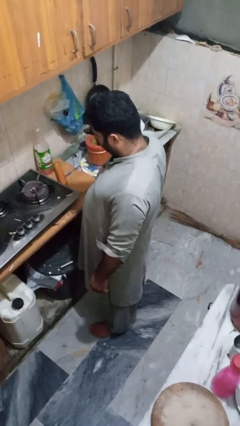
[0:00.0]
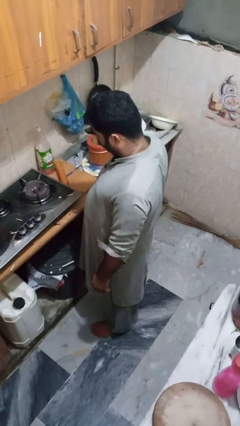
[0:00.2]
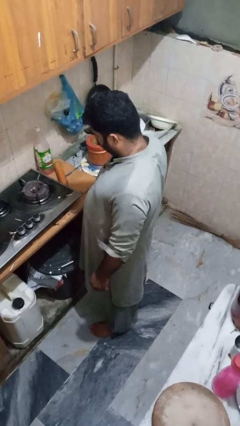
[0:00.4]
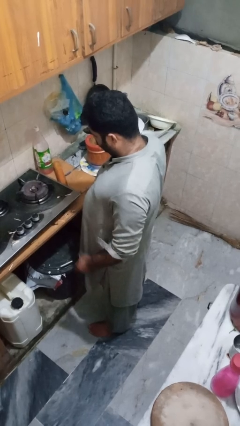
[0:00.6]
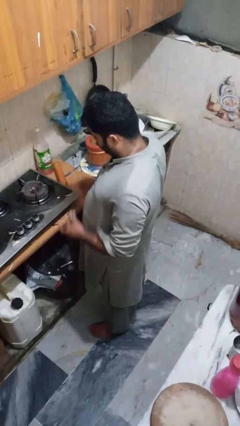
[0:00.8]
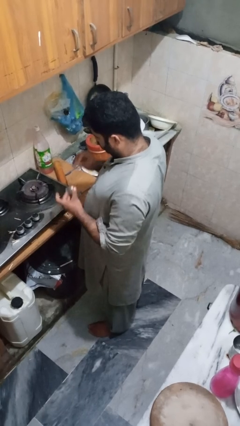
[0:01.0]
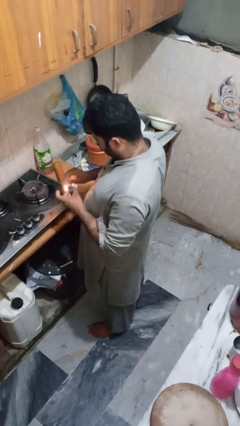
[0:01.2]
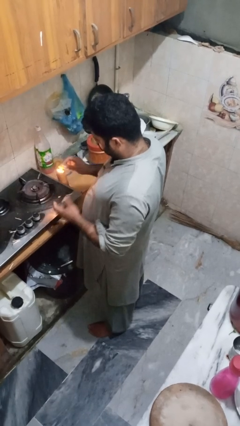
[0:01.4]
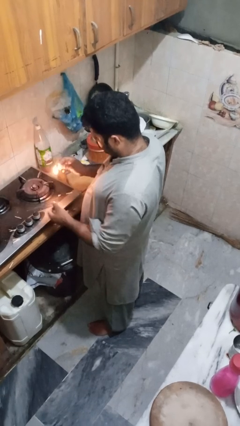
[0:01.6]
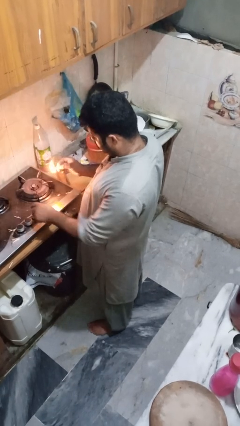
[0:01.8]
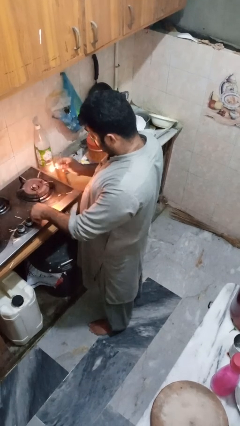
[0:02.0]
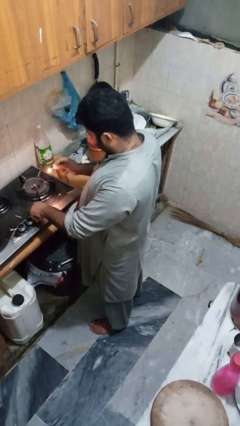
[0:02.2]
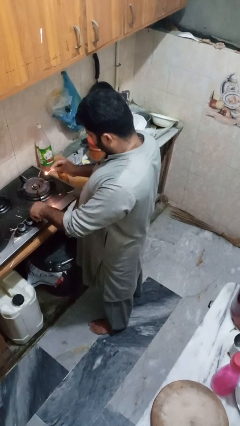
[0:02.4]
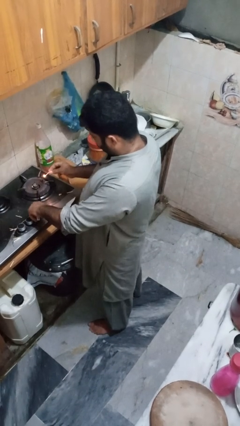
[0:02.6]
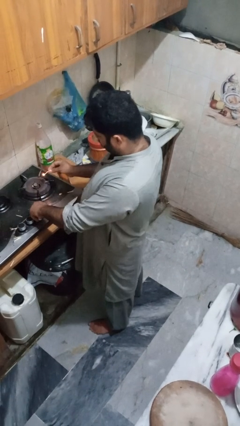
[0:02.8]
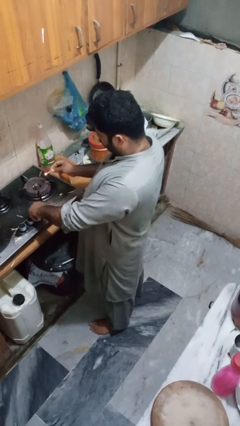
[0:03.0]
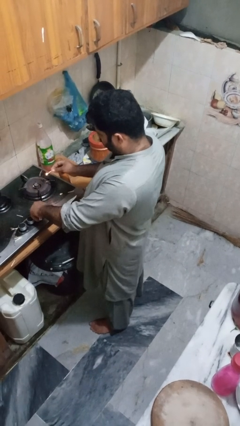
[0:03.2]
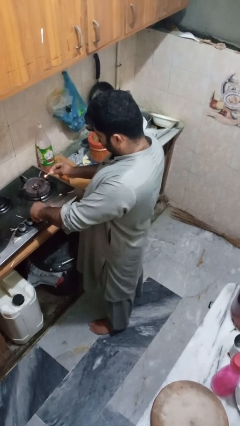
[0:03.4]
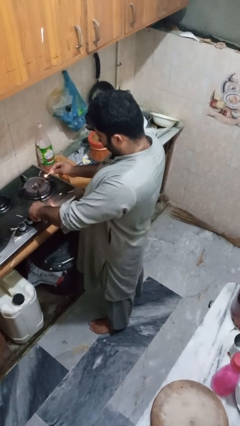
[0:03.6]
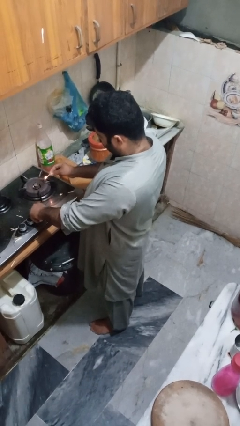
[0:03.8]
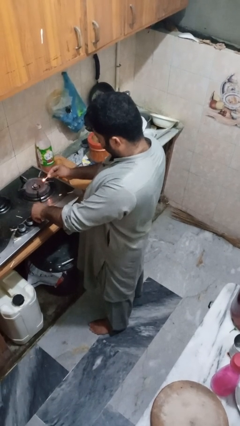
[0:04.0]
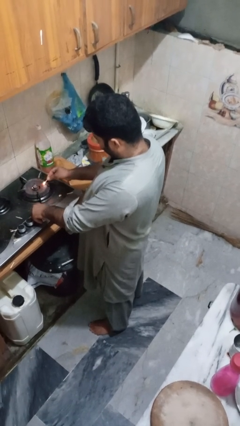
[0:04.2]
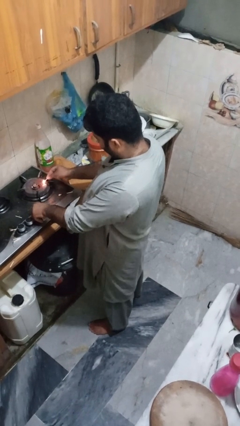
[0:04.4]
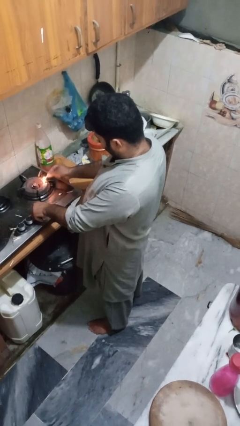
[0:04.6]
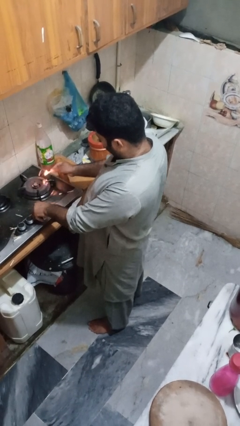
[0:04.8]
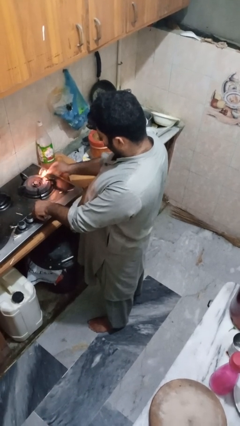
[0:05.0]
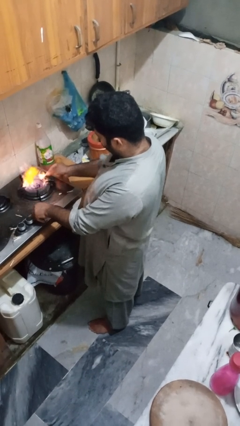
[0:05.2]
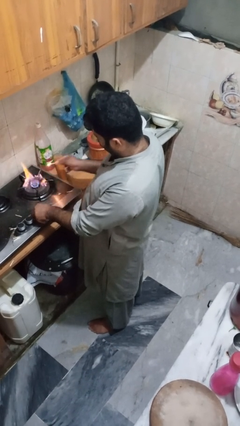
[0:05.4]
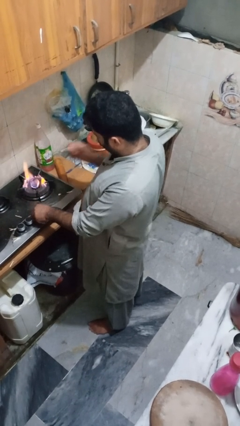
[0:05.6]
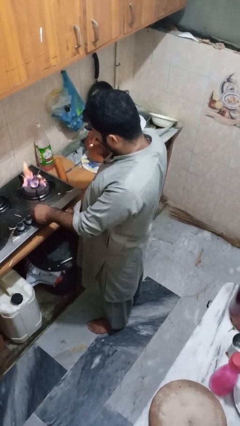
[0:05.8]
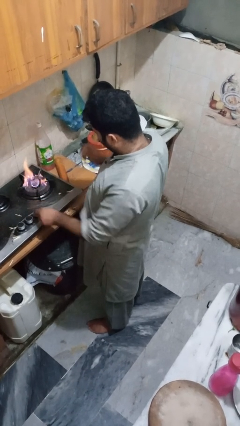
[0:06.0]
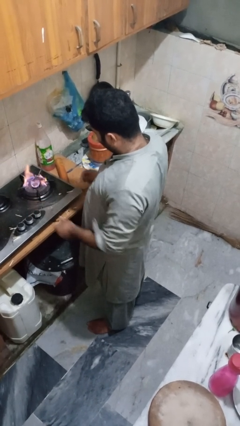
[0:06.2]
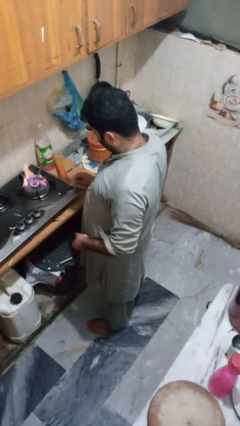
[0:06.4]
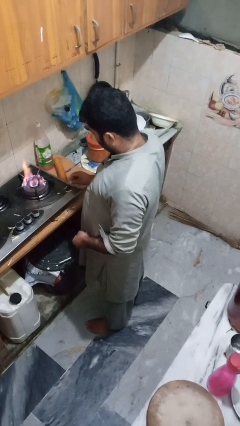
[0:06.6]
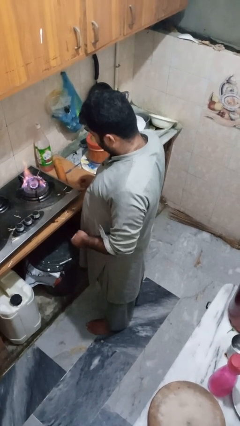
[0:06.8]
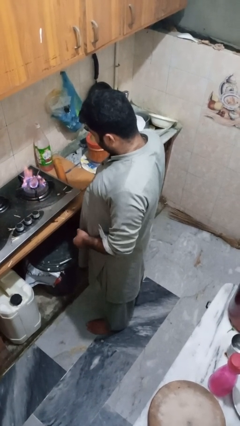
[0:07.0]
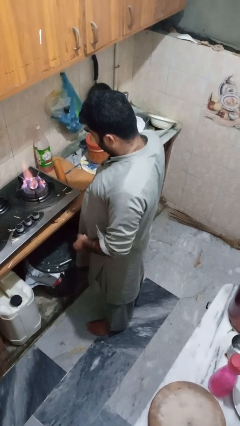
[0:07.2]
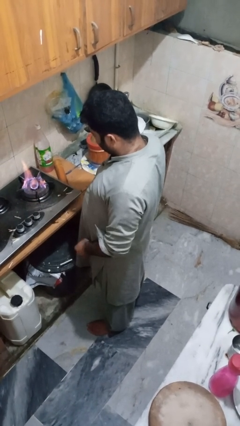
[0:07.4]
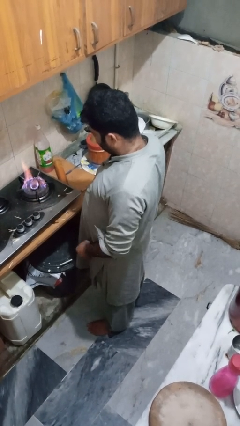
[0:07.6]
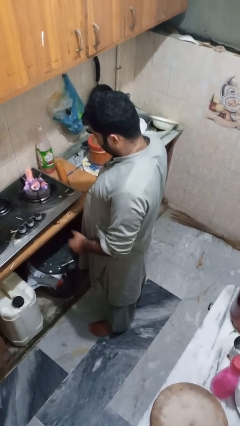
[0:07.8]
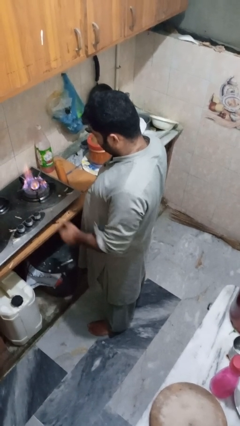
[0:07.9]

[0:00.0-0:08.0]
person turns on stovetop

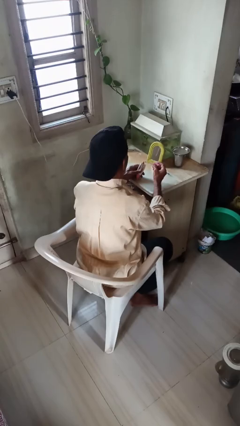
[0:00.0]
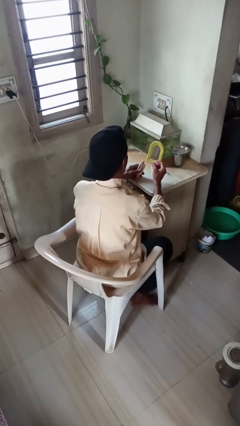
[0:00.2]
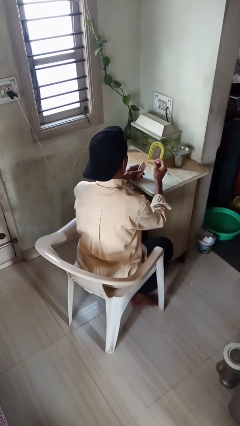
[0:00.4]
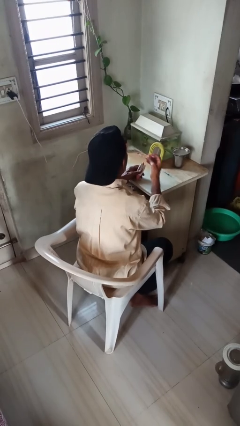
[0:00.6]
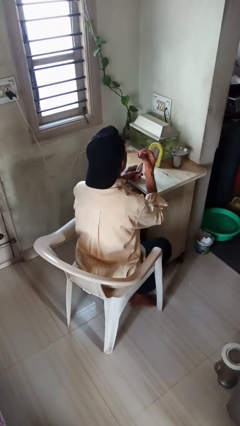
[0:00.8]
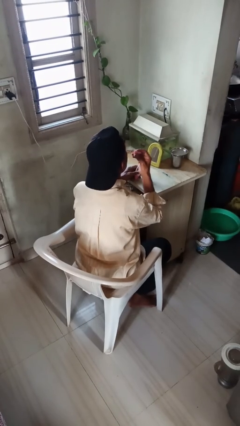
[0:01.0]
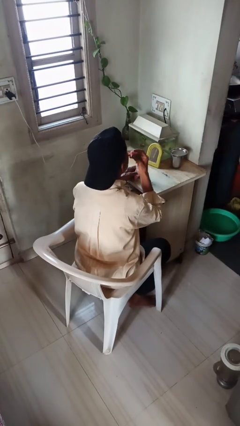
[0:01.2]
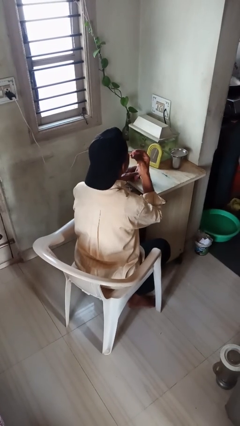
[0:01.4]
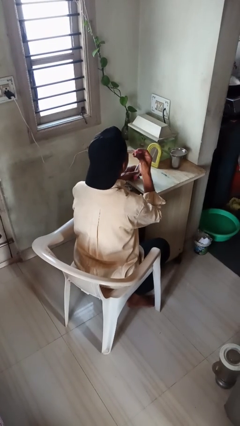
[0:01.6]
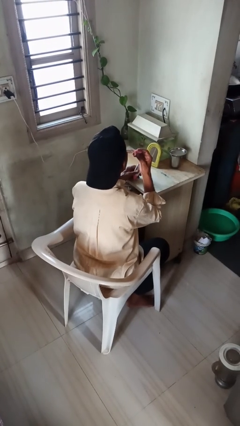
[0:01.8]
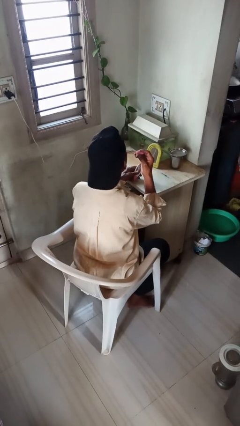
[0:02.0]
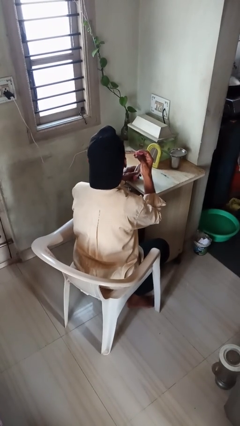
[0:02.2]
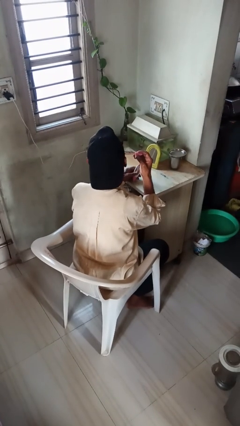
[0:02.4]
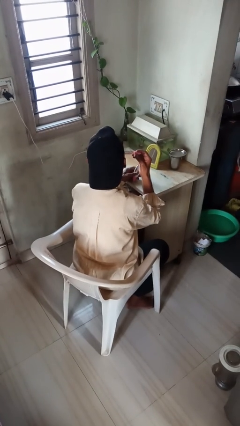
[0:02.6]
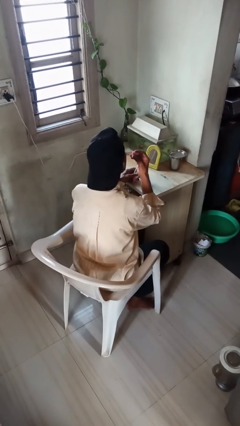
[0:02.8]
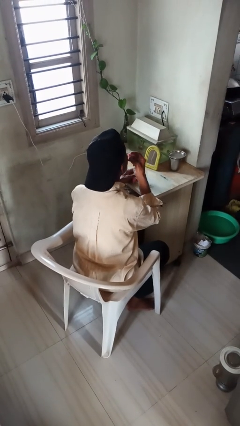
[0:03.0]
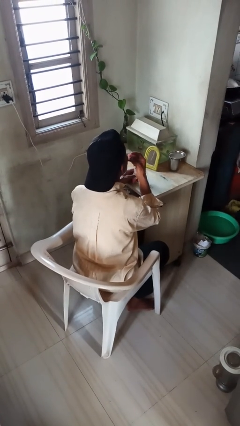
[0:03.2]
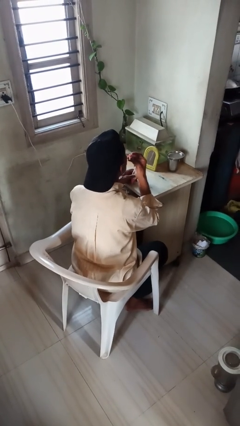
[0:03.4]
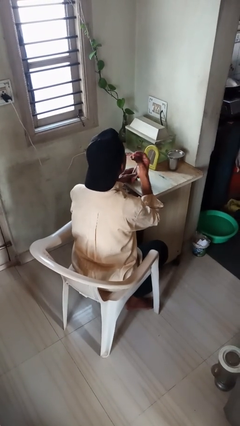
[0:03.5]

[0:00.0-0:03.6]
person applies lip makeup

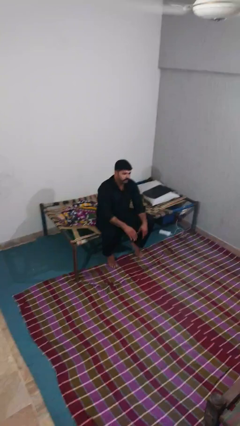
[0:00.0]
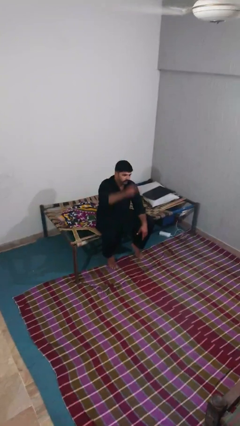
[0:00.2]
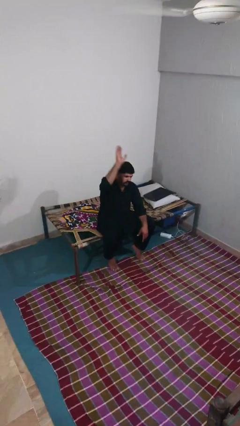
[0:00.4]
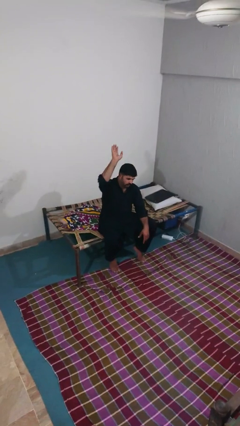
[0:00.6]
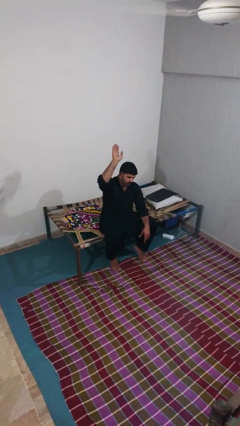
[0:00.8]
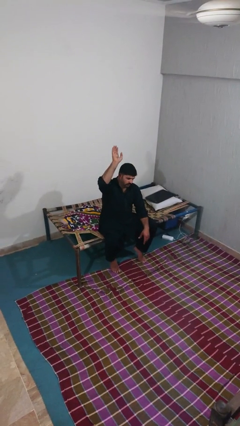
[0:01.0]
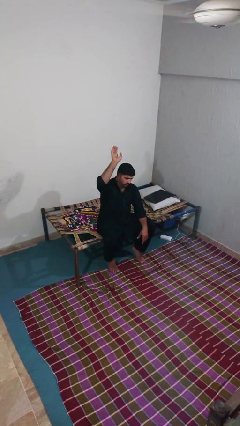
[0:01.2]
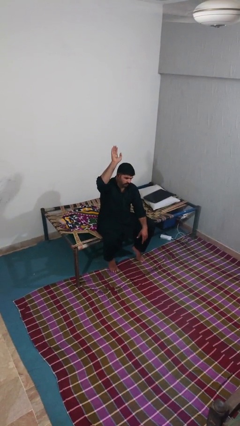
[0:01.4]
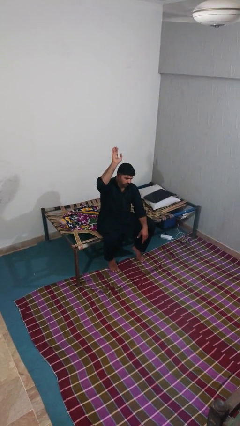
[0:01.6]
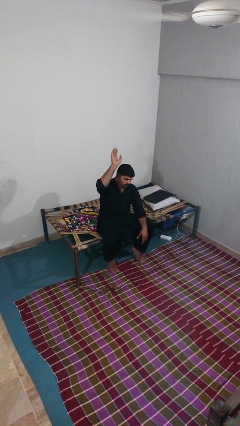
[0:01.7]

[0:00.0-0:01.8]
person gestures raise hand

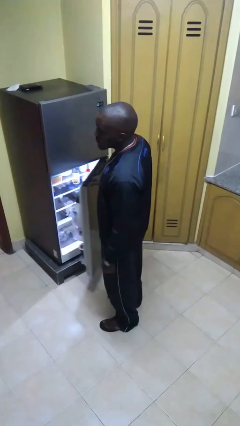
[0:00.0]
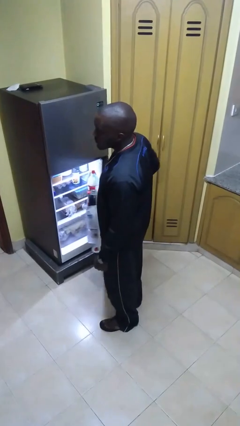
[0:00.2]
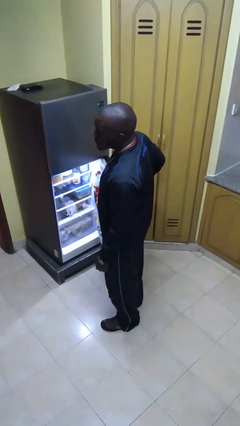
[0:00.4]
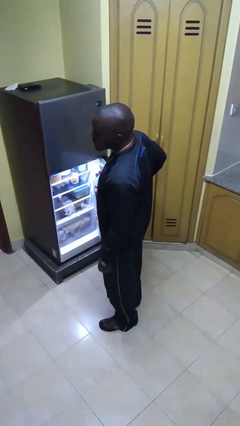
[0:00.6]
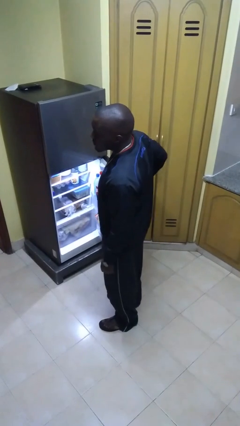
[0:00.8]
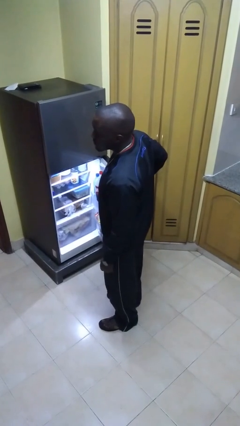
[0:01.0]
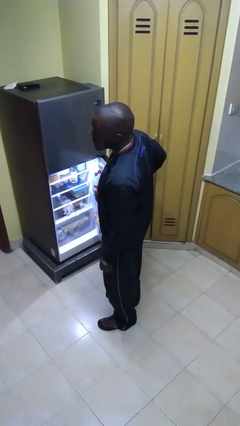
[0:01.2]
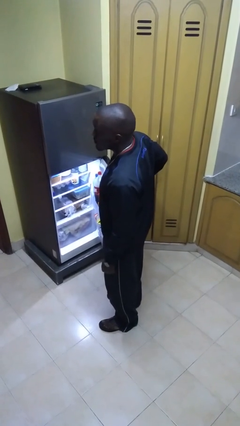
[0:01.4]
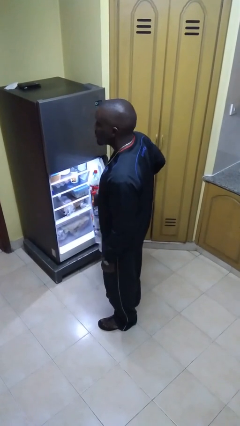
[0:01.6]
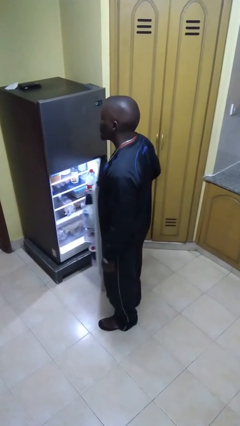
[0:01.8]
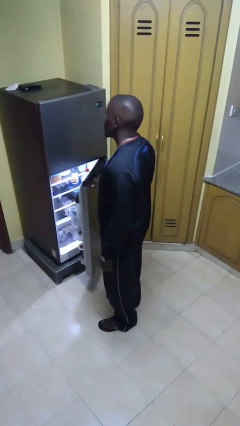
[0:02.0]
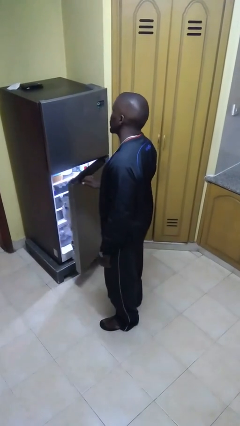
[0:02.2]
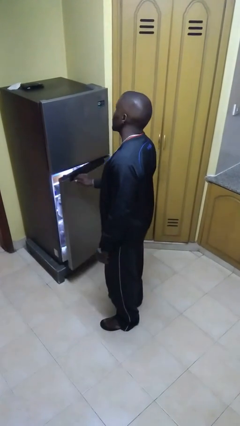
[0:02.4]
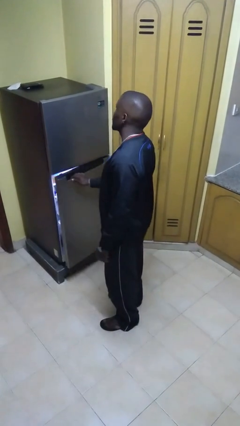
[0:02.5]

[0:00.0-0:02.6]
person dries hands with towel

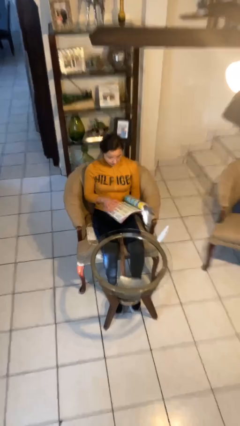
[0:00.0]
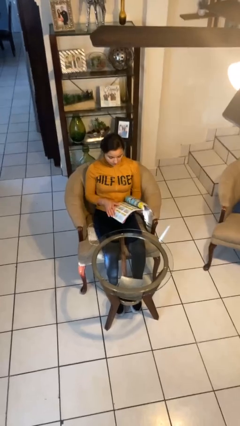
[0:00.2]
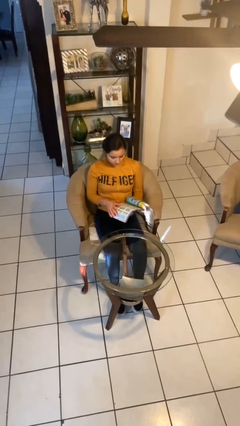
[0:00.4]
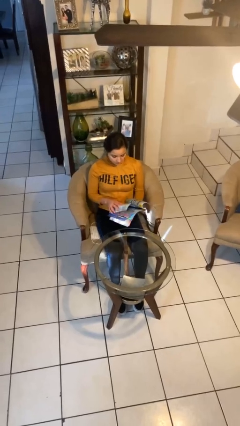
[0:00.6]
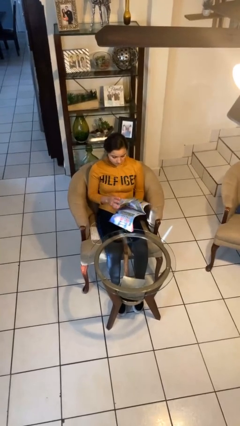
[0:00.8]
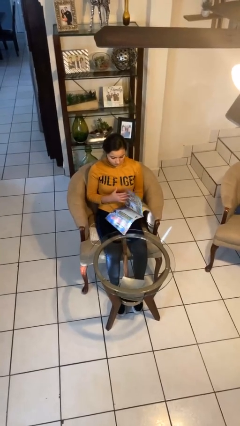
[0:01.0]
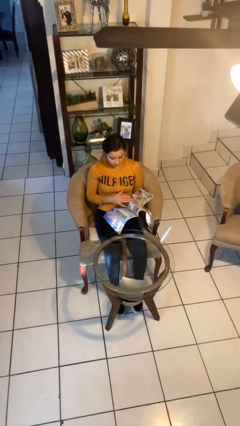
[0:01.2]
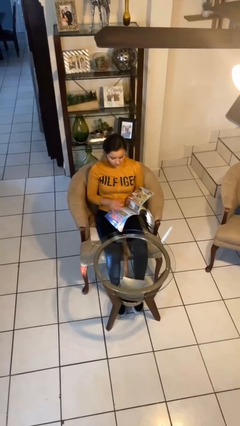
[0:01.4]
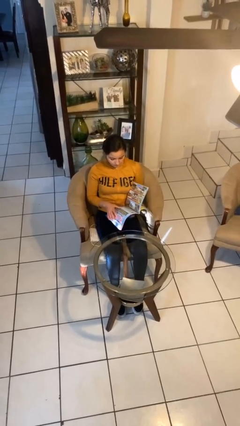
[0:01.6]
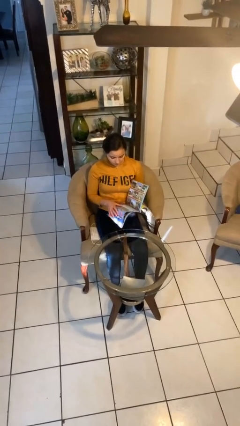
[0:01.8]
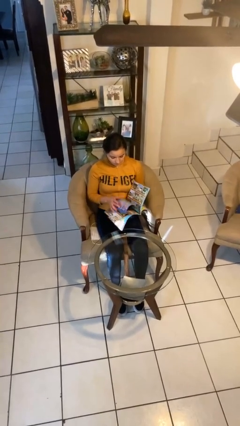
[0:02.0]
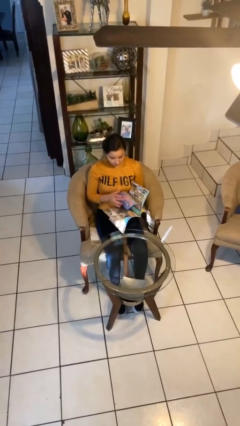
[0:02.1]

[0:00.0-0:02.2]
person reads magazine
